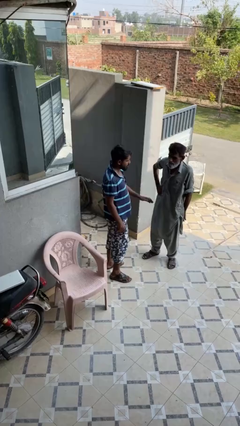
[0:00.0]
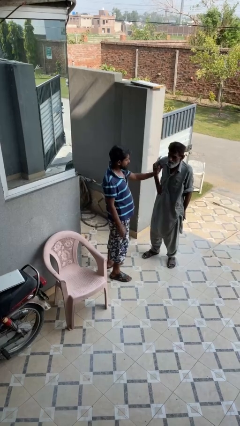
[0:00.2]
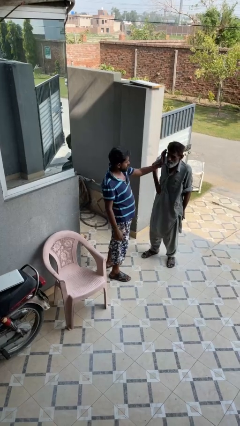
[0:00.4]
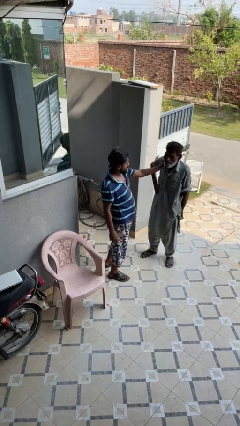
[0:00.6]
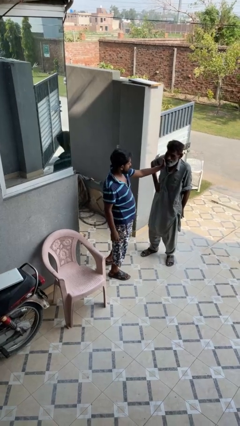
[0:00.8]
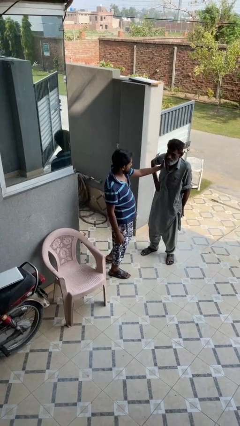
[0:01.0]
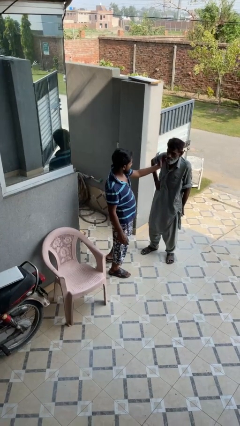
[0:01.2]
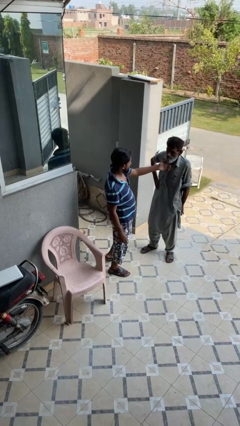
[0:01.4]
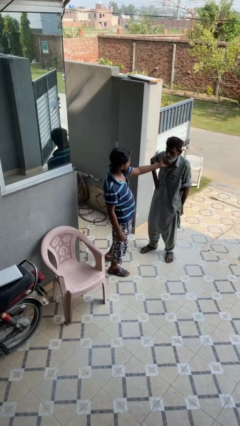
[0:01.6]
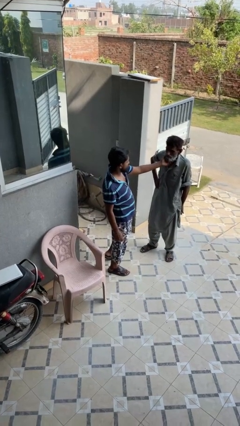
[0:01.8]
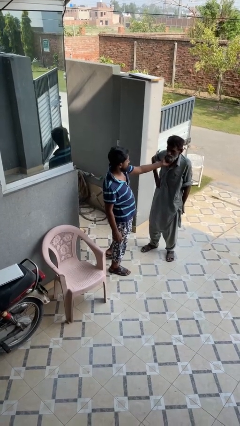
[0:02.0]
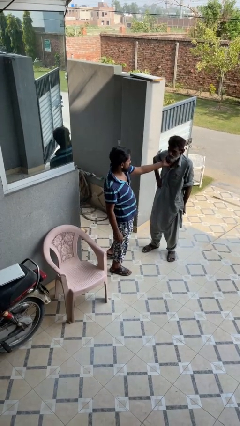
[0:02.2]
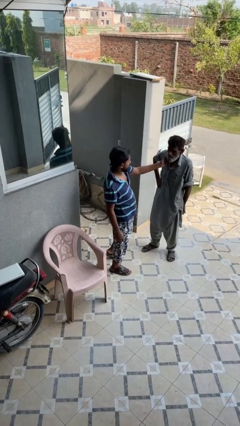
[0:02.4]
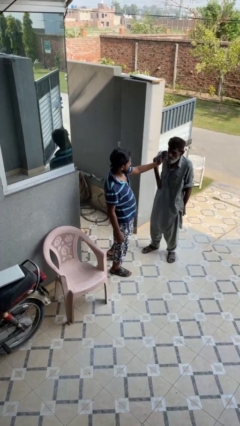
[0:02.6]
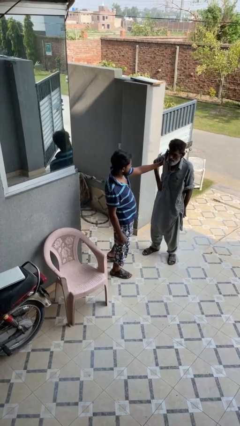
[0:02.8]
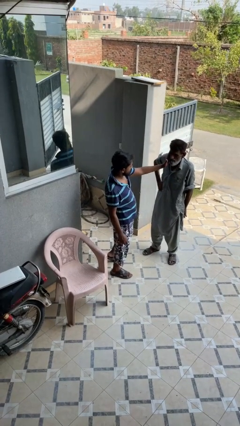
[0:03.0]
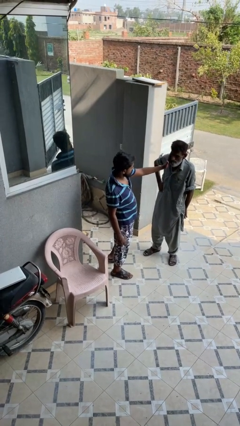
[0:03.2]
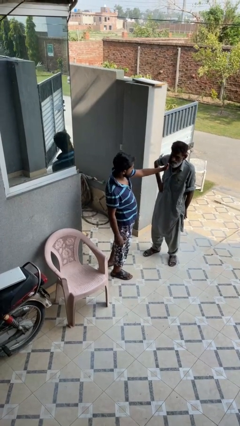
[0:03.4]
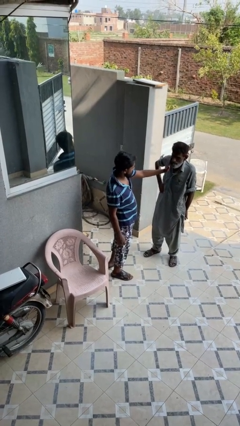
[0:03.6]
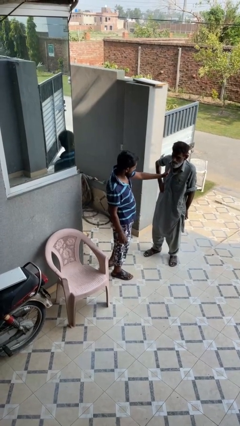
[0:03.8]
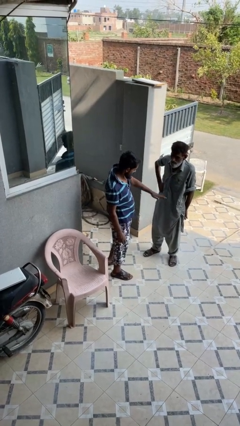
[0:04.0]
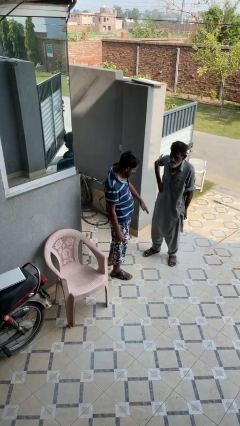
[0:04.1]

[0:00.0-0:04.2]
person touches face of person

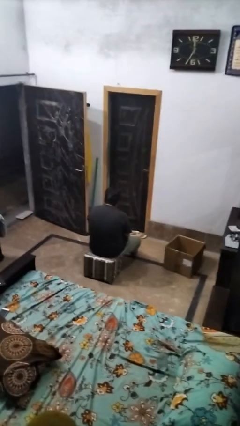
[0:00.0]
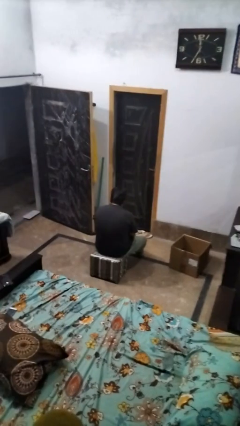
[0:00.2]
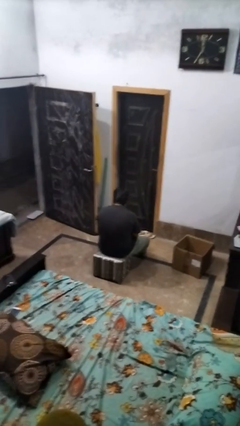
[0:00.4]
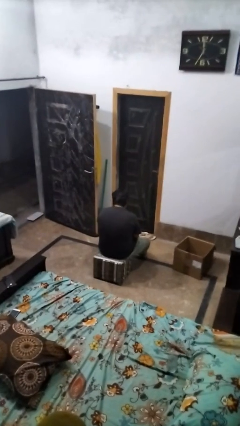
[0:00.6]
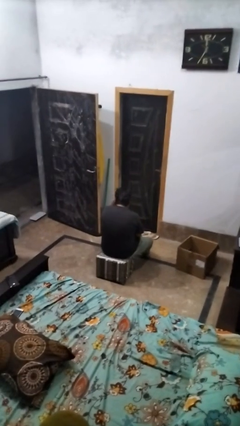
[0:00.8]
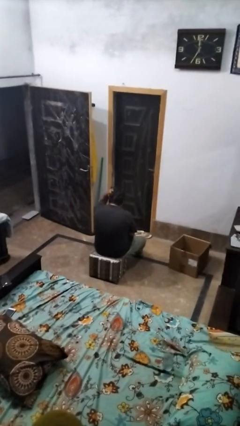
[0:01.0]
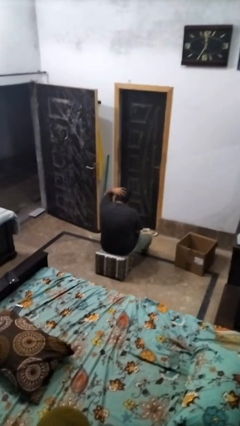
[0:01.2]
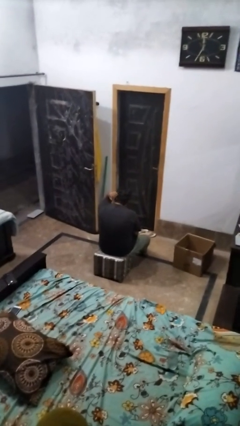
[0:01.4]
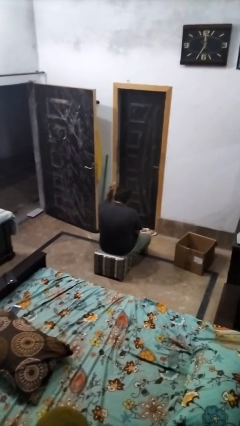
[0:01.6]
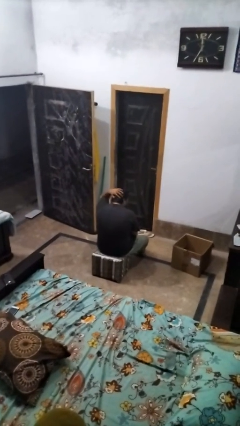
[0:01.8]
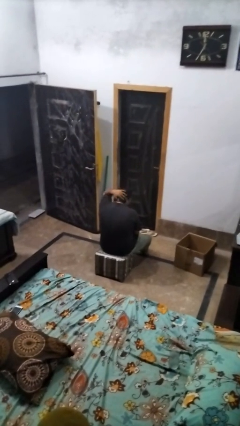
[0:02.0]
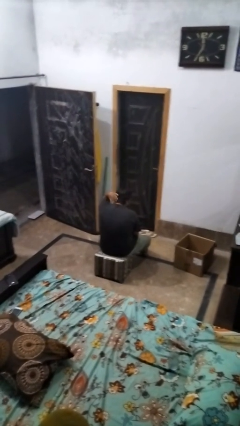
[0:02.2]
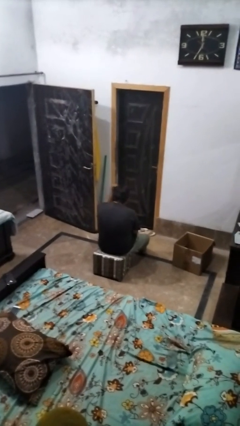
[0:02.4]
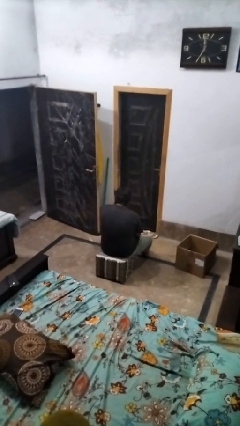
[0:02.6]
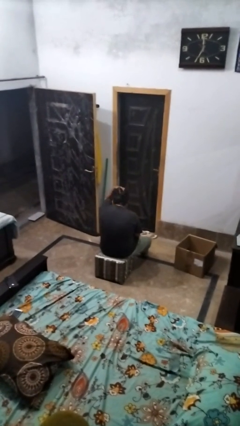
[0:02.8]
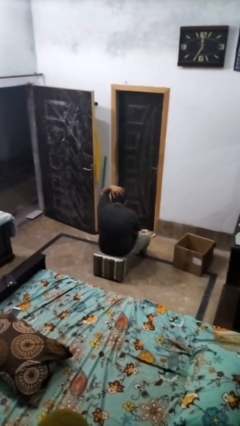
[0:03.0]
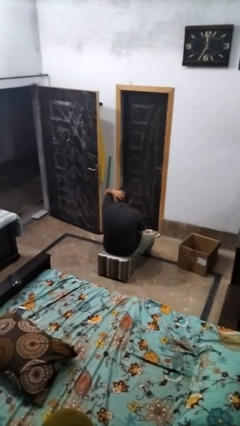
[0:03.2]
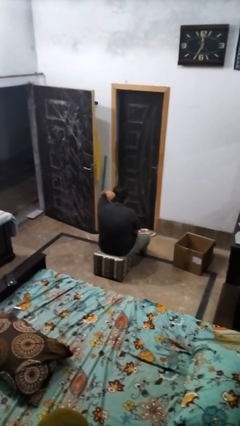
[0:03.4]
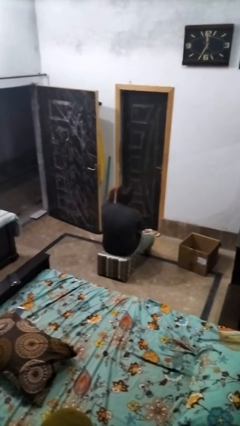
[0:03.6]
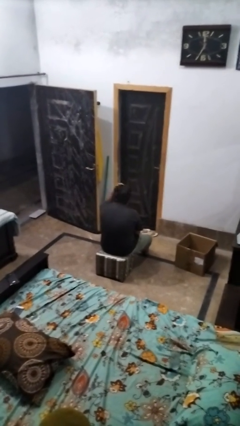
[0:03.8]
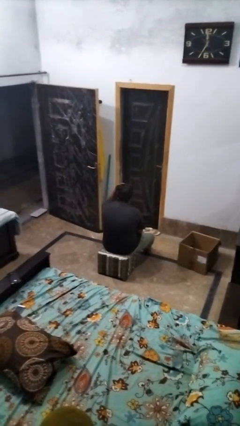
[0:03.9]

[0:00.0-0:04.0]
person strokes hair

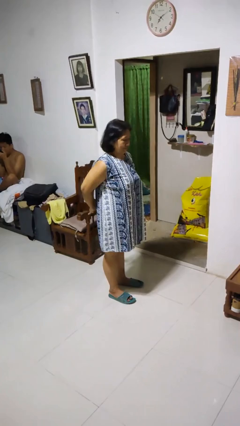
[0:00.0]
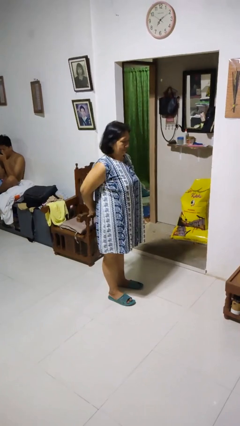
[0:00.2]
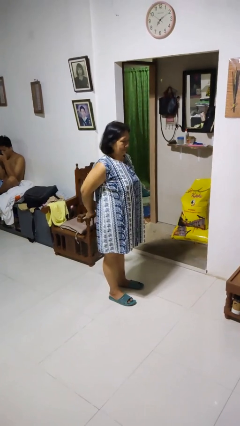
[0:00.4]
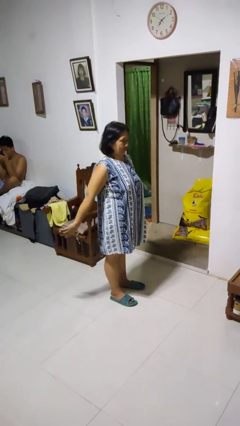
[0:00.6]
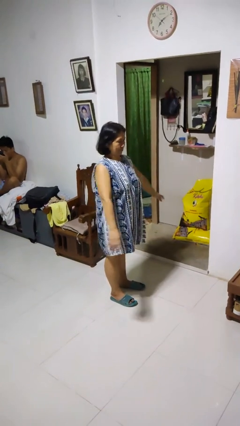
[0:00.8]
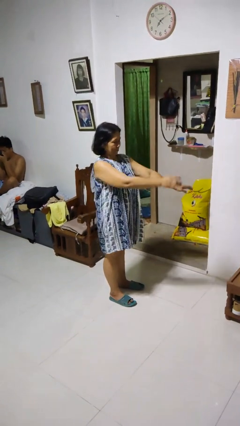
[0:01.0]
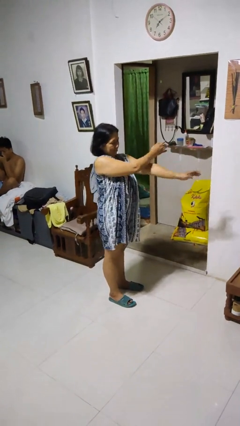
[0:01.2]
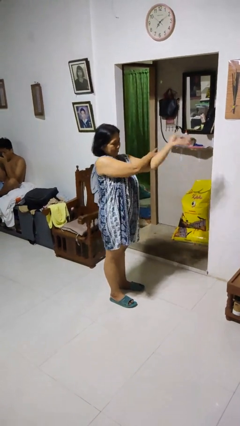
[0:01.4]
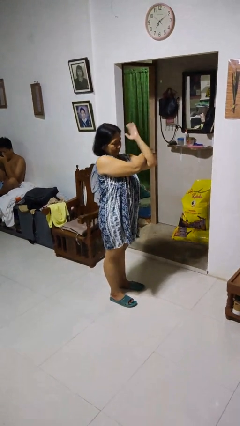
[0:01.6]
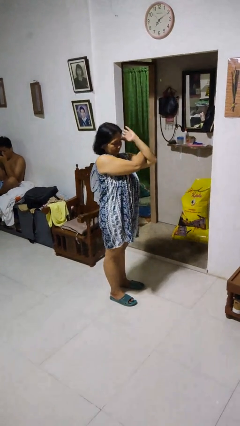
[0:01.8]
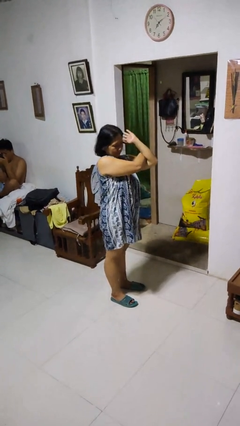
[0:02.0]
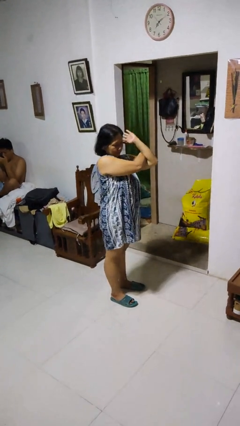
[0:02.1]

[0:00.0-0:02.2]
person stretches arms to side

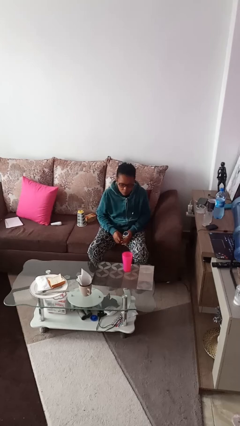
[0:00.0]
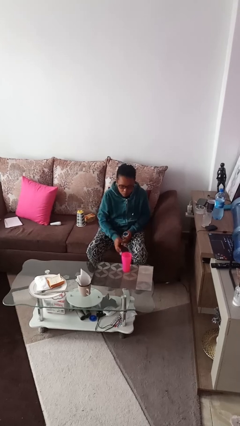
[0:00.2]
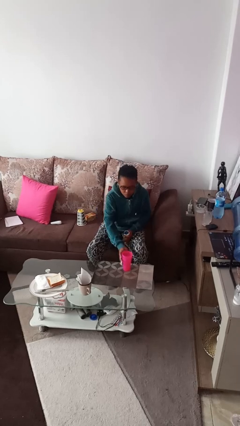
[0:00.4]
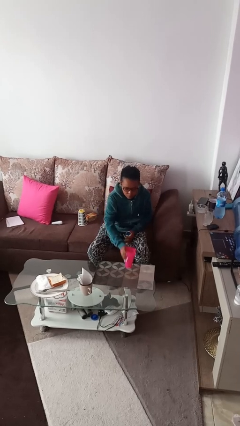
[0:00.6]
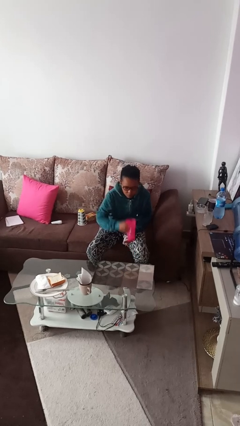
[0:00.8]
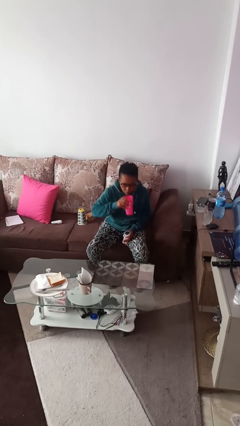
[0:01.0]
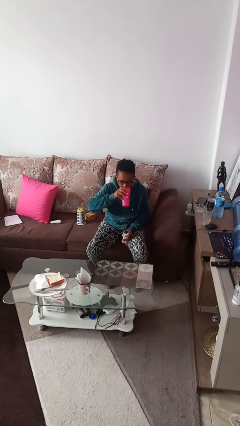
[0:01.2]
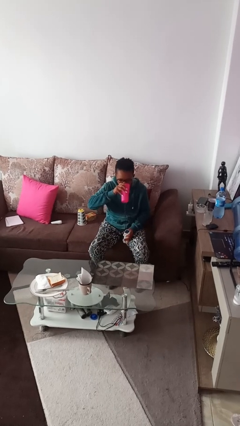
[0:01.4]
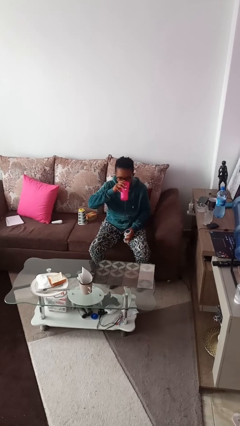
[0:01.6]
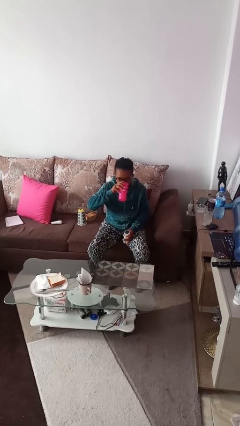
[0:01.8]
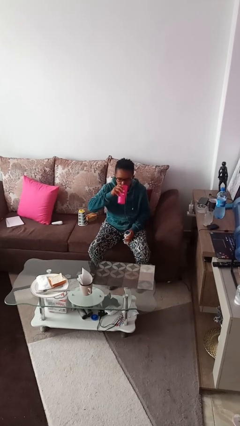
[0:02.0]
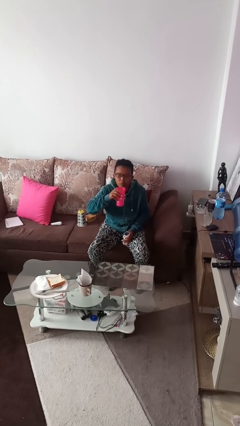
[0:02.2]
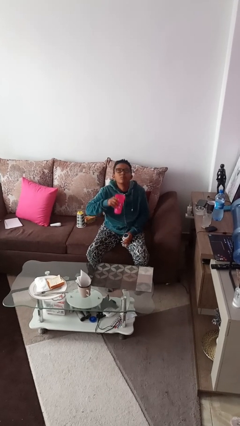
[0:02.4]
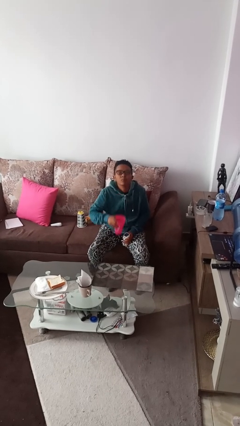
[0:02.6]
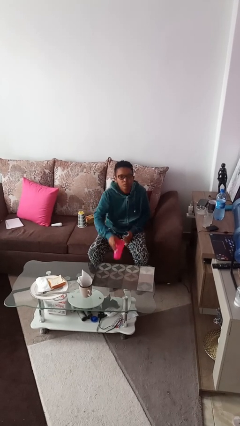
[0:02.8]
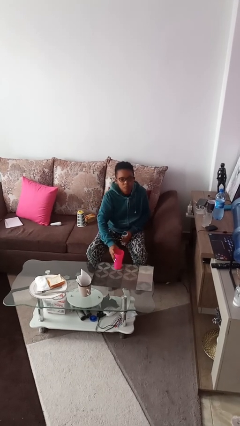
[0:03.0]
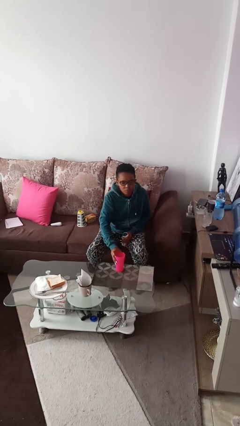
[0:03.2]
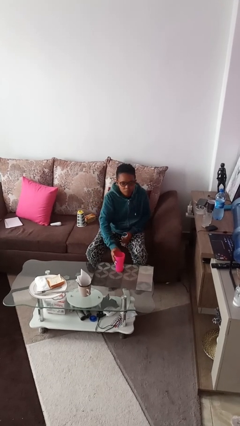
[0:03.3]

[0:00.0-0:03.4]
person drinks from cup

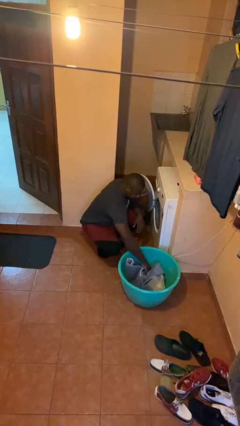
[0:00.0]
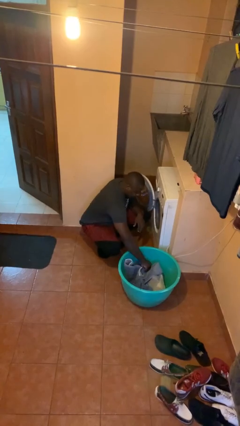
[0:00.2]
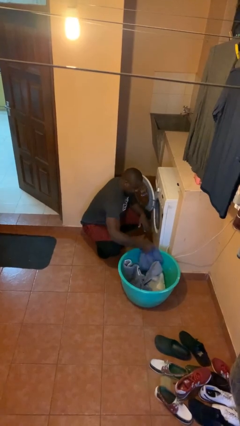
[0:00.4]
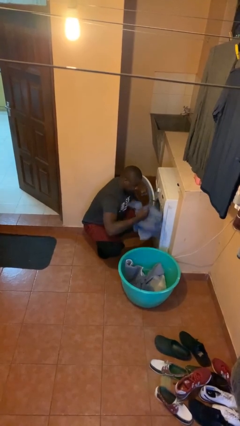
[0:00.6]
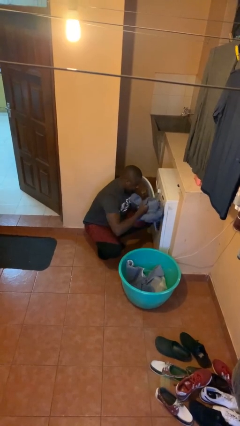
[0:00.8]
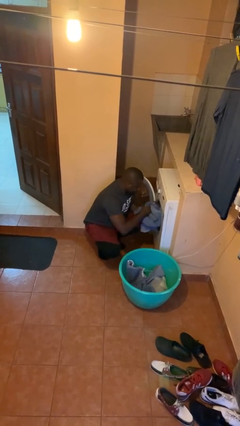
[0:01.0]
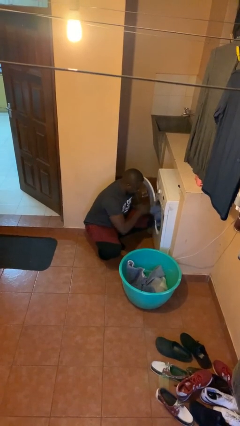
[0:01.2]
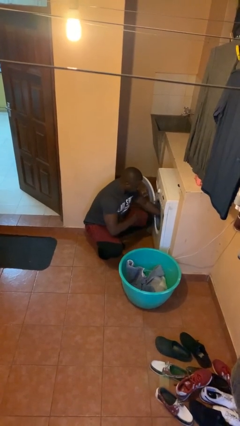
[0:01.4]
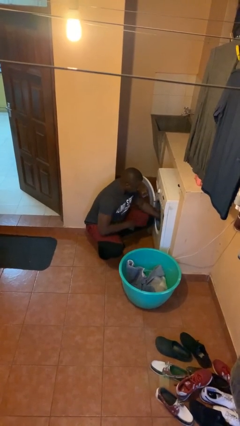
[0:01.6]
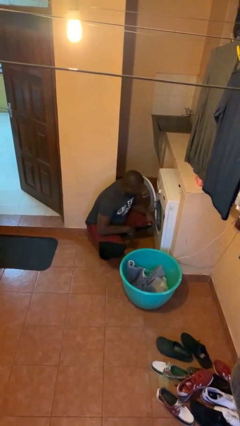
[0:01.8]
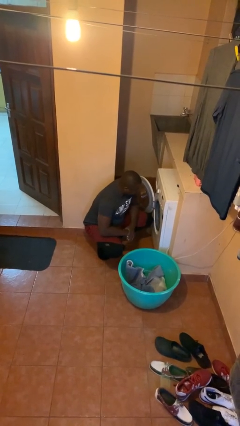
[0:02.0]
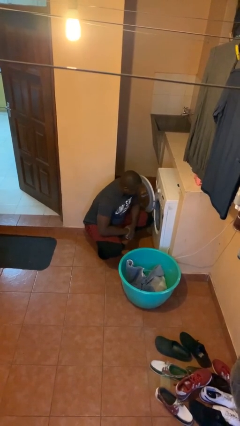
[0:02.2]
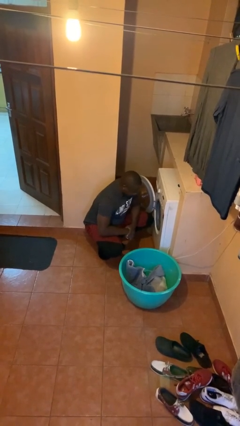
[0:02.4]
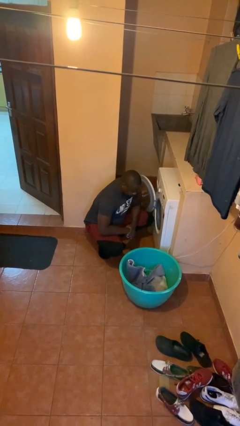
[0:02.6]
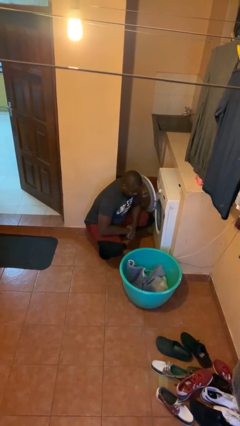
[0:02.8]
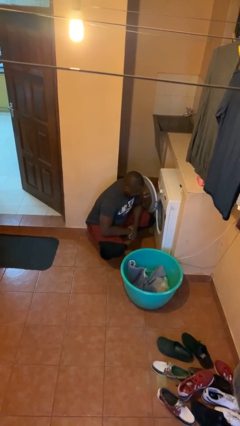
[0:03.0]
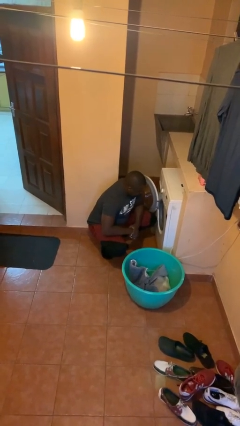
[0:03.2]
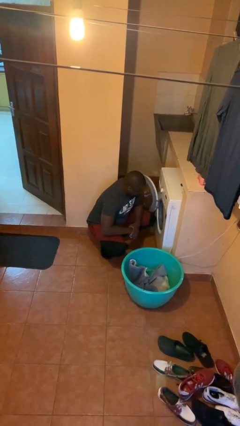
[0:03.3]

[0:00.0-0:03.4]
person loads dryer

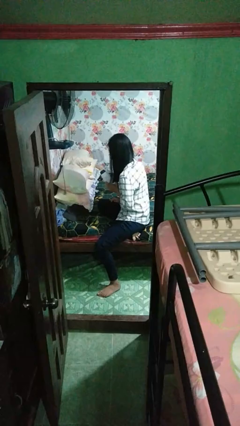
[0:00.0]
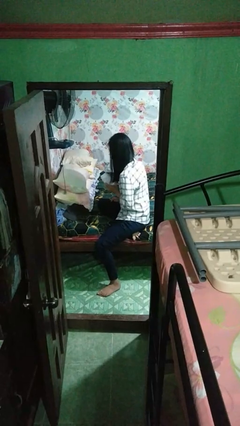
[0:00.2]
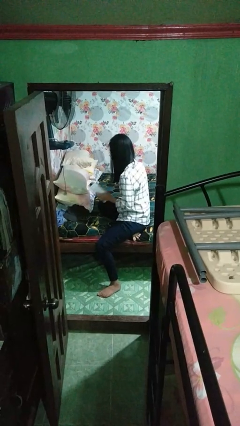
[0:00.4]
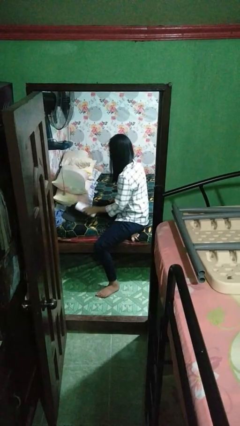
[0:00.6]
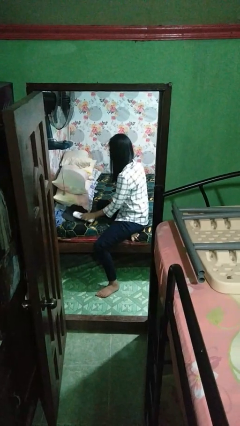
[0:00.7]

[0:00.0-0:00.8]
person puts down object on bed
